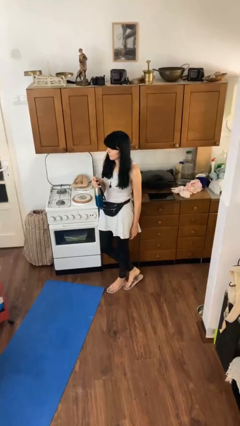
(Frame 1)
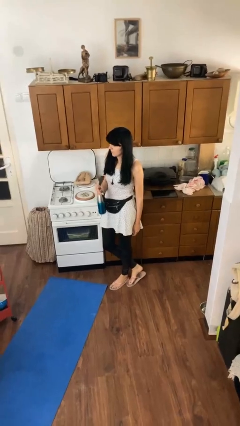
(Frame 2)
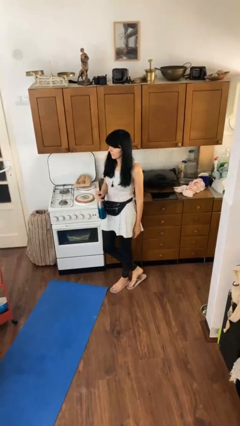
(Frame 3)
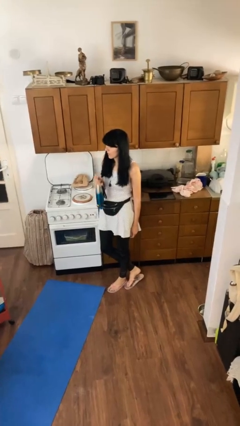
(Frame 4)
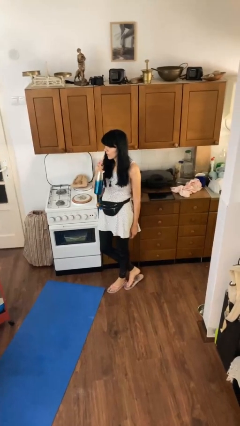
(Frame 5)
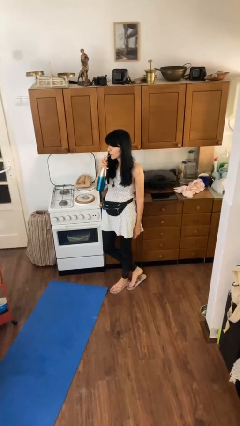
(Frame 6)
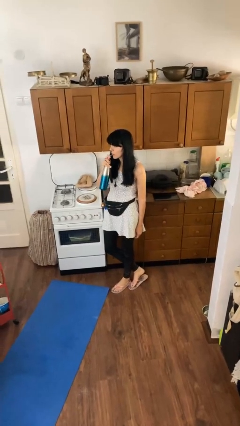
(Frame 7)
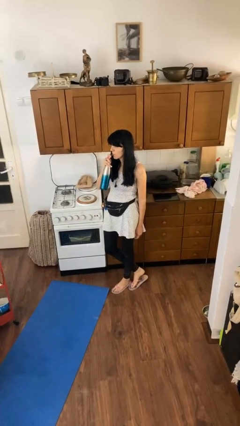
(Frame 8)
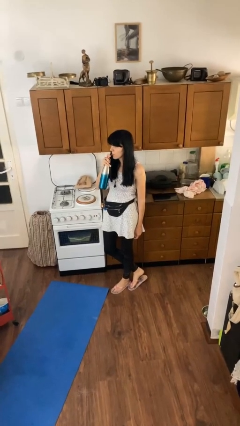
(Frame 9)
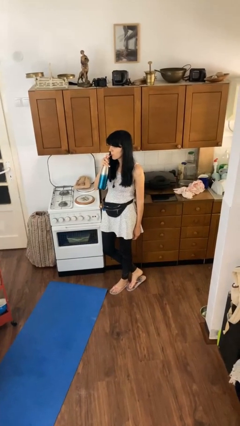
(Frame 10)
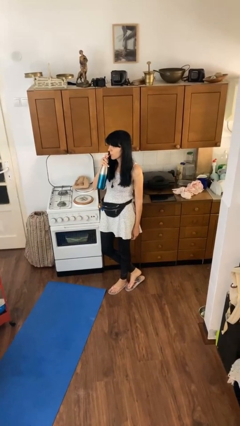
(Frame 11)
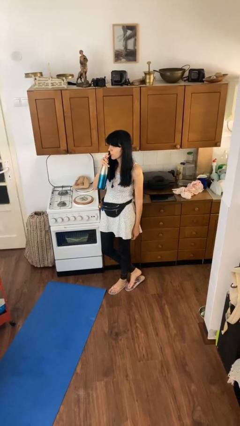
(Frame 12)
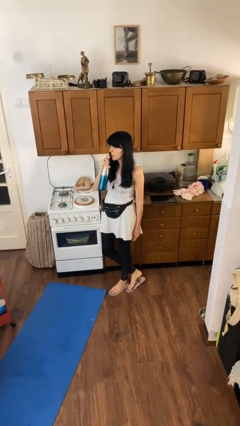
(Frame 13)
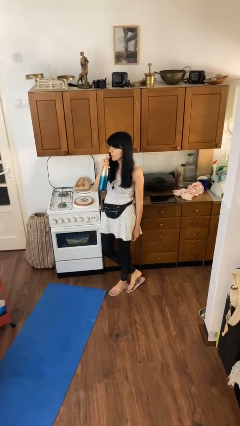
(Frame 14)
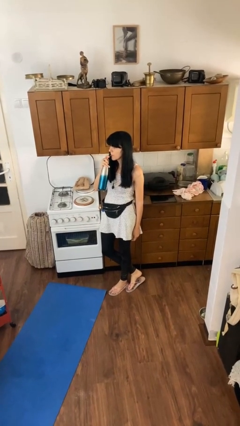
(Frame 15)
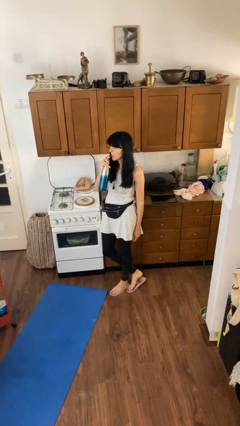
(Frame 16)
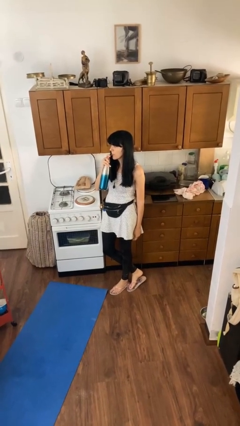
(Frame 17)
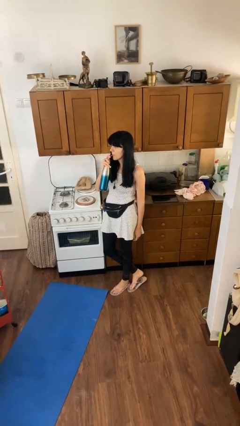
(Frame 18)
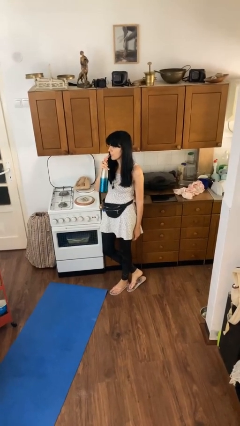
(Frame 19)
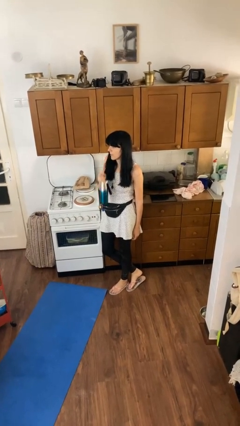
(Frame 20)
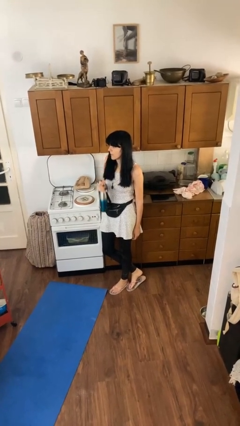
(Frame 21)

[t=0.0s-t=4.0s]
person drinks from straw

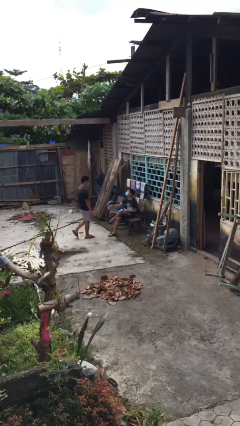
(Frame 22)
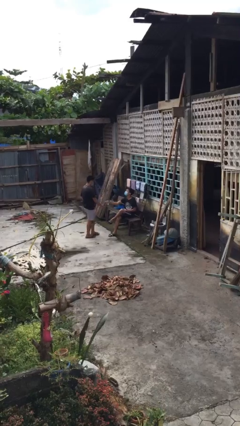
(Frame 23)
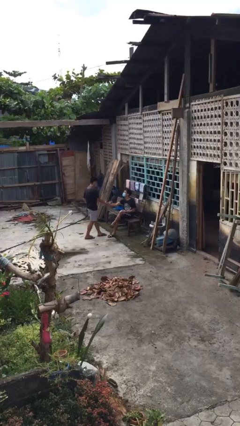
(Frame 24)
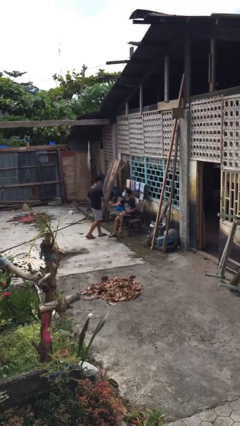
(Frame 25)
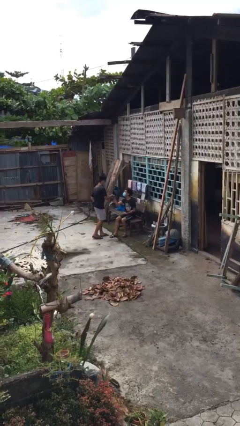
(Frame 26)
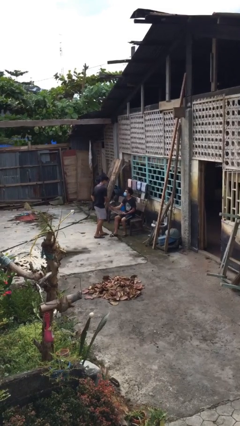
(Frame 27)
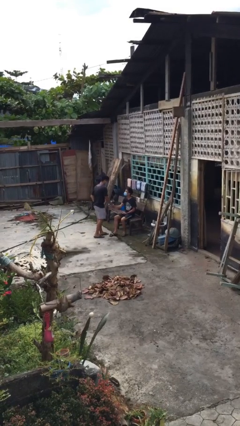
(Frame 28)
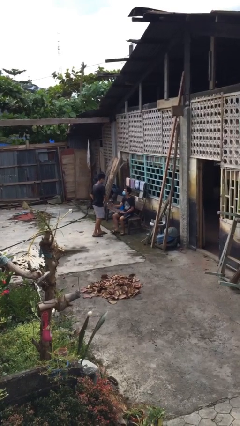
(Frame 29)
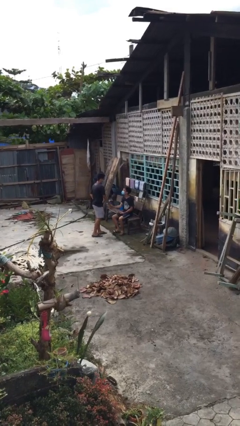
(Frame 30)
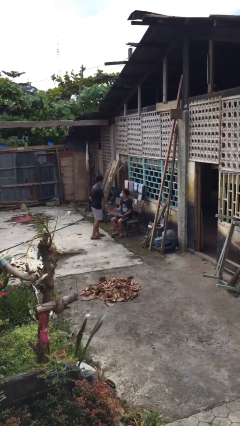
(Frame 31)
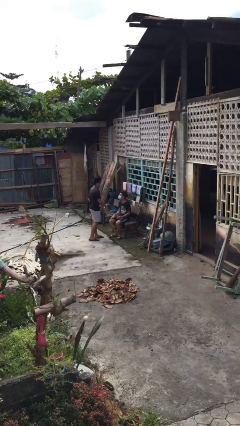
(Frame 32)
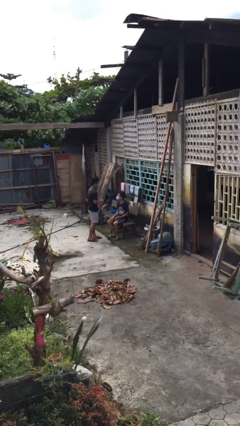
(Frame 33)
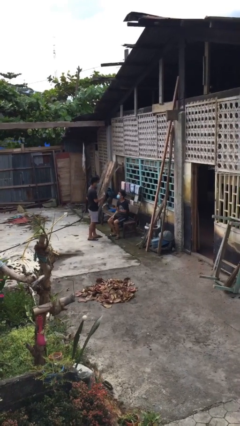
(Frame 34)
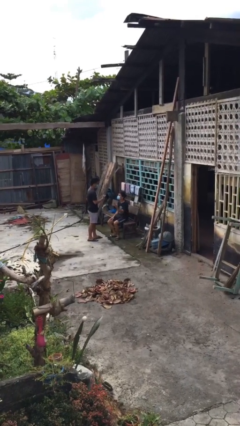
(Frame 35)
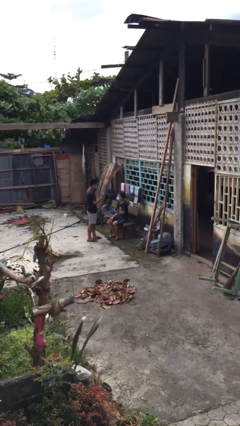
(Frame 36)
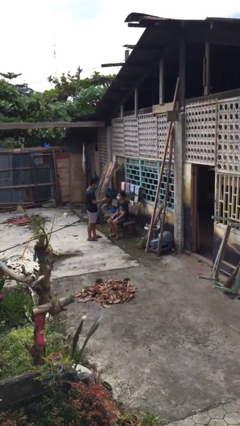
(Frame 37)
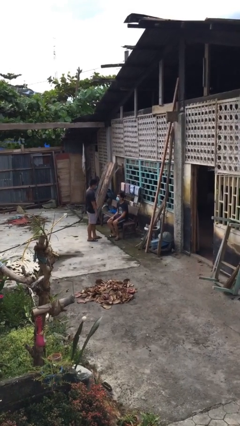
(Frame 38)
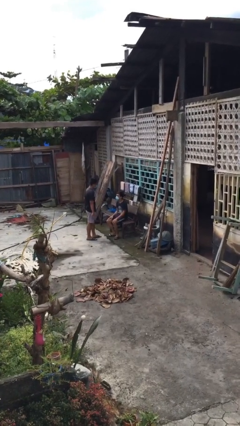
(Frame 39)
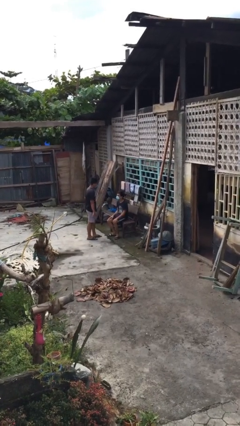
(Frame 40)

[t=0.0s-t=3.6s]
person shakes hand

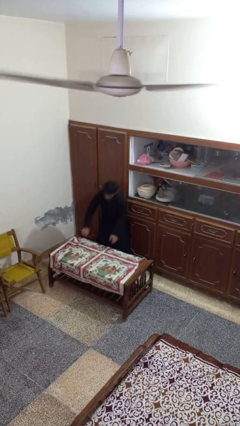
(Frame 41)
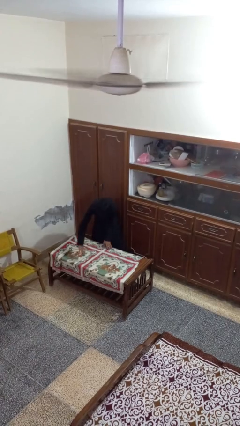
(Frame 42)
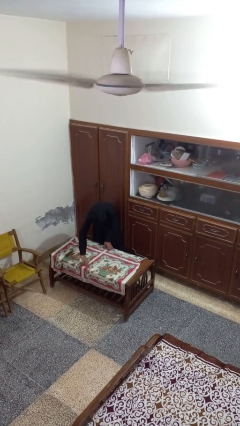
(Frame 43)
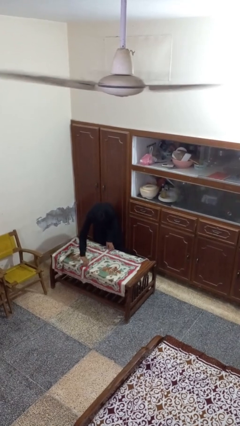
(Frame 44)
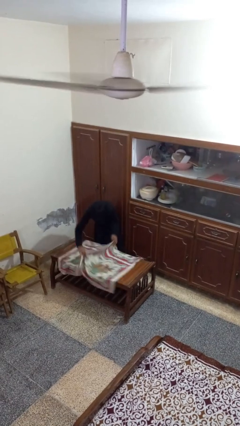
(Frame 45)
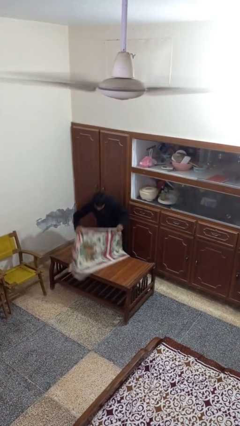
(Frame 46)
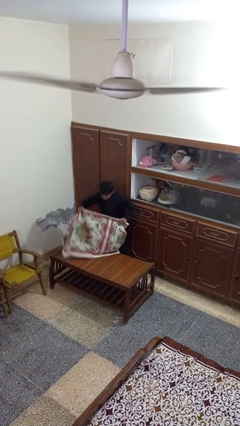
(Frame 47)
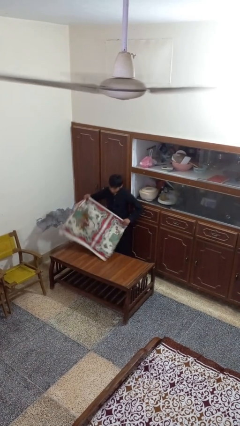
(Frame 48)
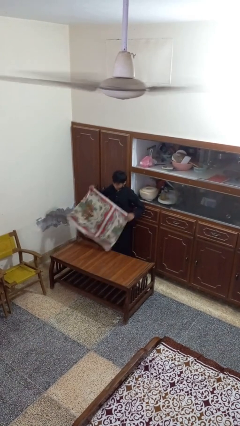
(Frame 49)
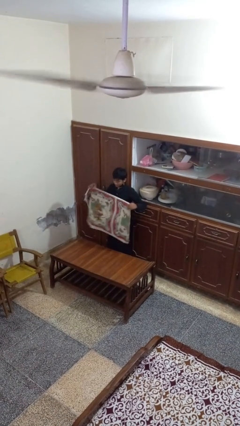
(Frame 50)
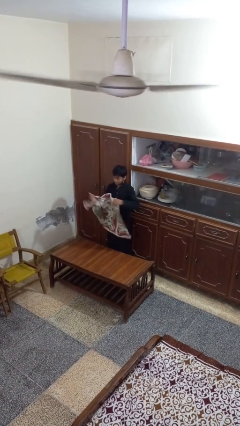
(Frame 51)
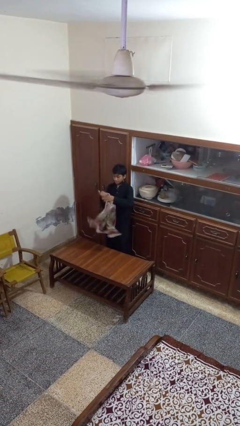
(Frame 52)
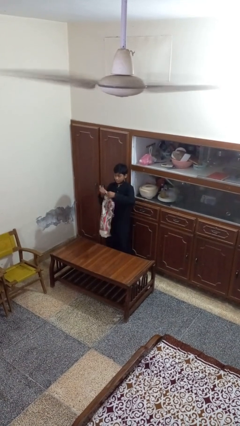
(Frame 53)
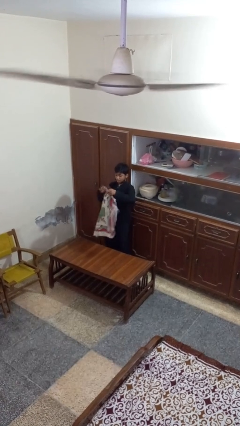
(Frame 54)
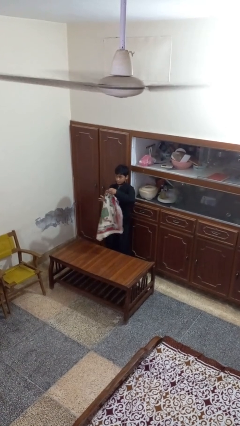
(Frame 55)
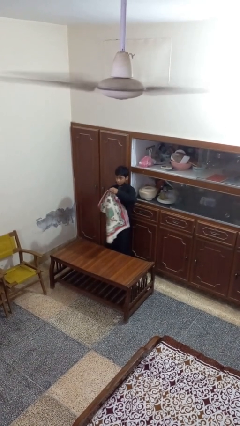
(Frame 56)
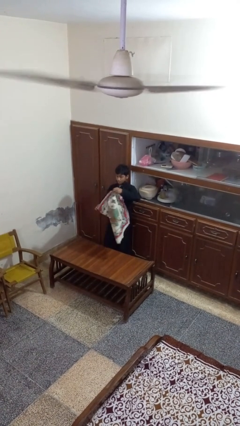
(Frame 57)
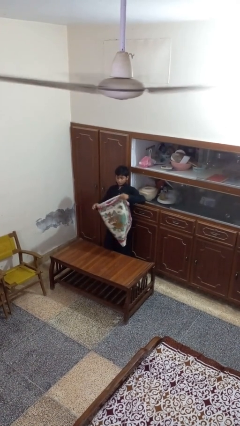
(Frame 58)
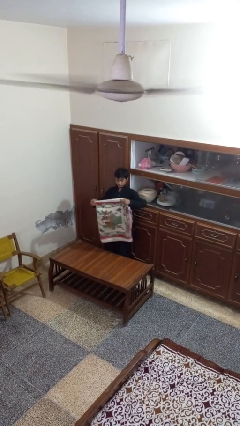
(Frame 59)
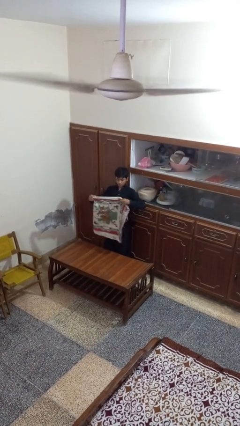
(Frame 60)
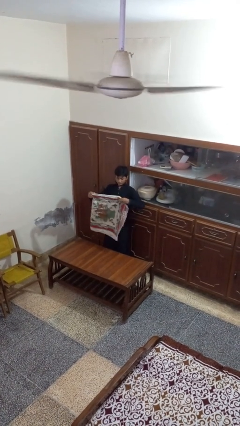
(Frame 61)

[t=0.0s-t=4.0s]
person folds tablecloth

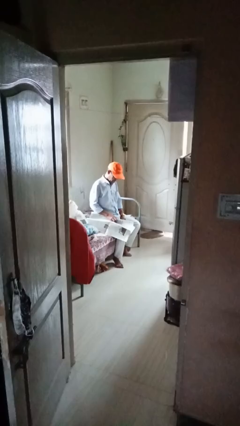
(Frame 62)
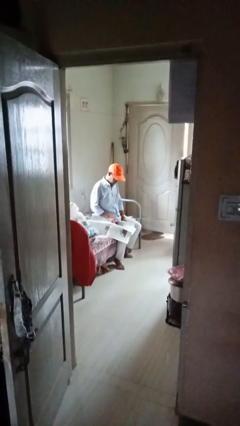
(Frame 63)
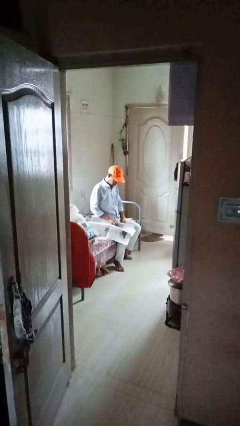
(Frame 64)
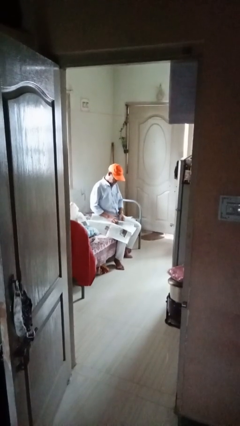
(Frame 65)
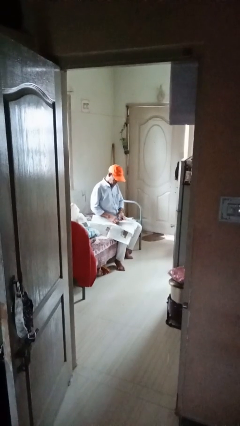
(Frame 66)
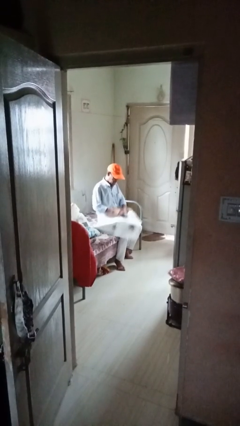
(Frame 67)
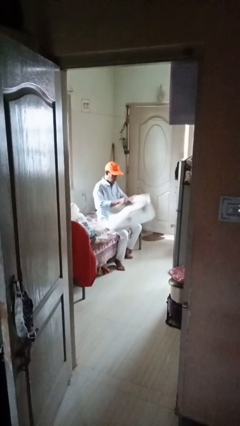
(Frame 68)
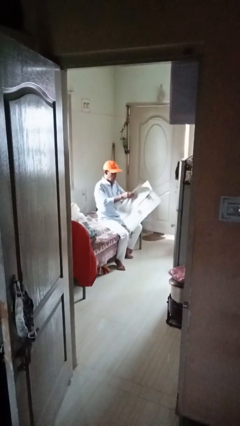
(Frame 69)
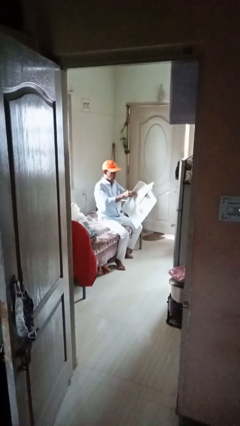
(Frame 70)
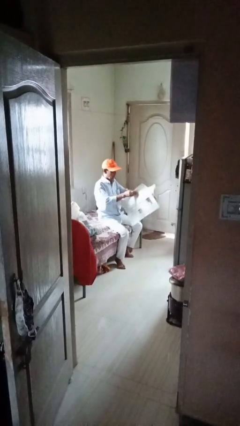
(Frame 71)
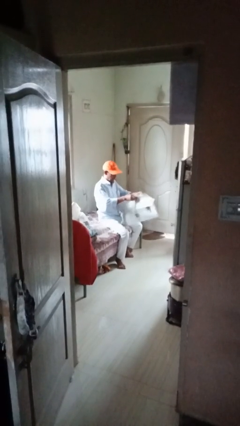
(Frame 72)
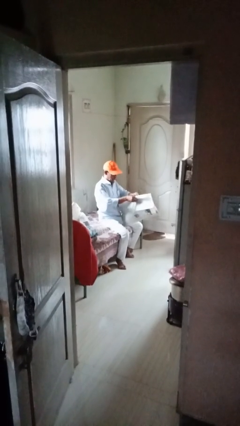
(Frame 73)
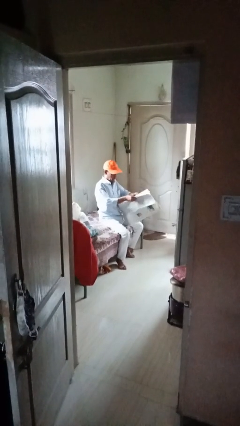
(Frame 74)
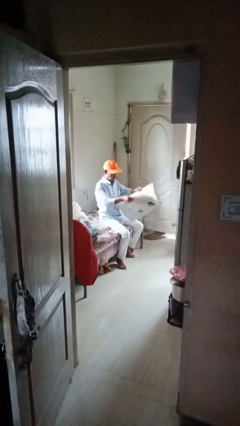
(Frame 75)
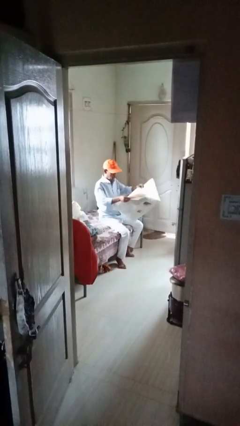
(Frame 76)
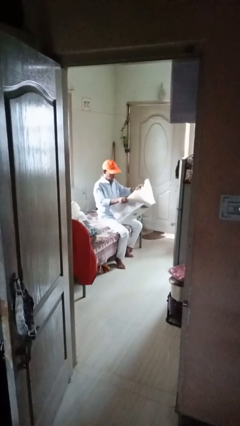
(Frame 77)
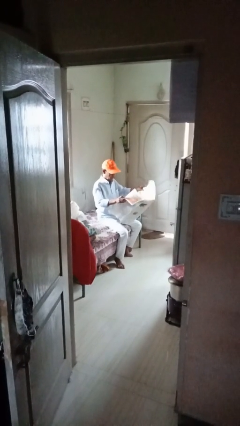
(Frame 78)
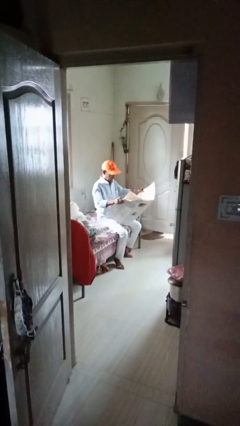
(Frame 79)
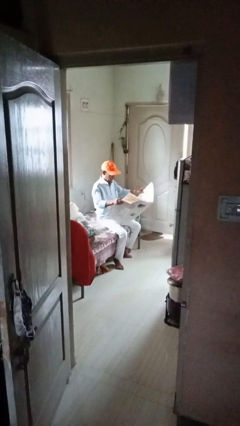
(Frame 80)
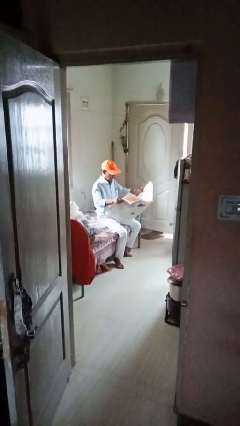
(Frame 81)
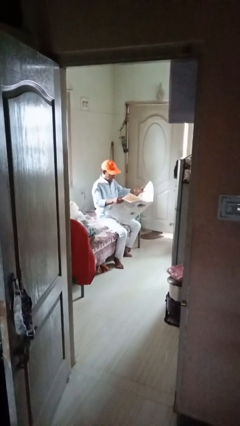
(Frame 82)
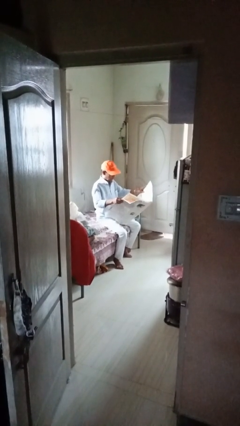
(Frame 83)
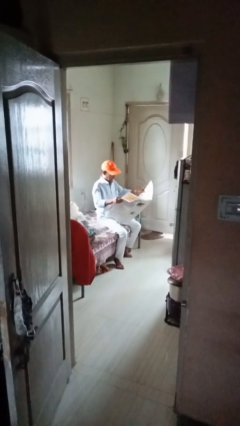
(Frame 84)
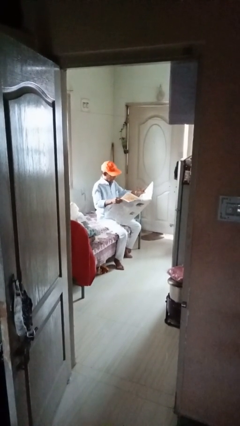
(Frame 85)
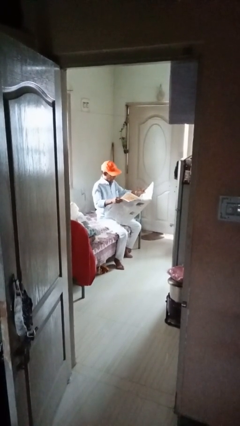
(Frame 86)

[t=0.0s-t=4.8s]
person reads newspaper

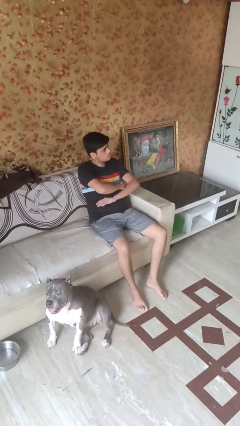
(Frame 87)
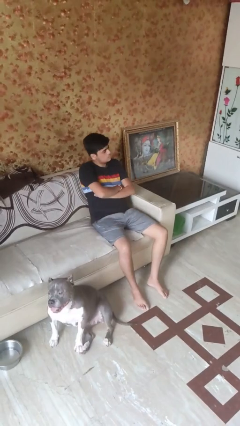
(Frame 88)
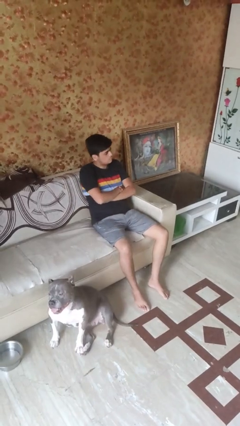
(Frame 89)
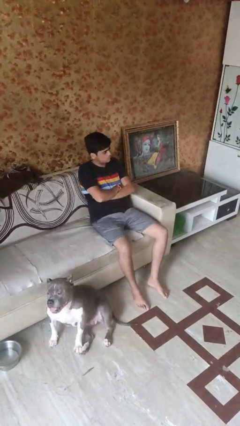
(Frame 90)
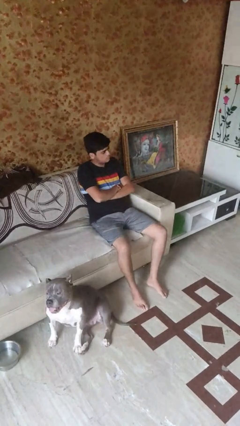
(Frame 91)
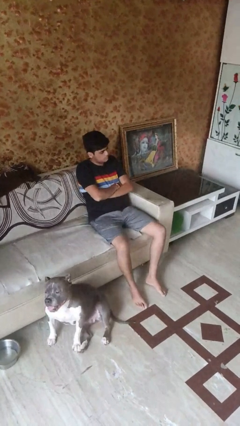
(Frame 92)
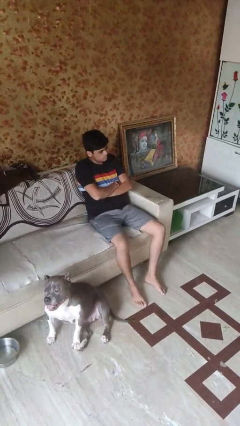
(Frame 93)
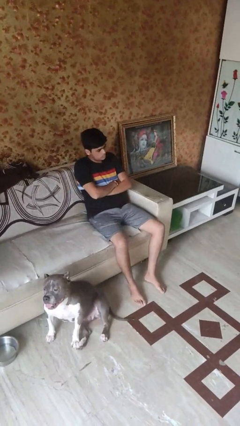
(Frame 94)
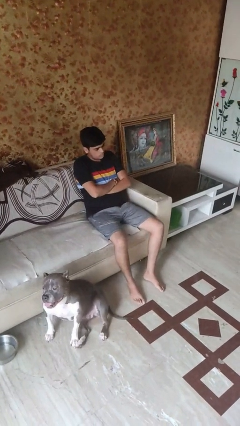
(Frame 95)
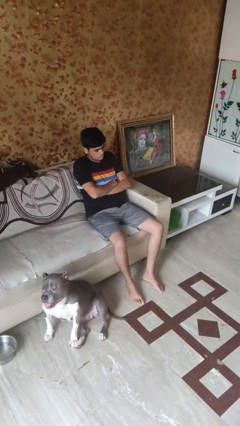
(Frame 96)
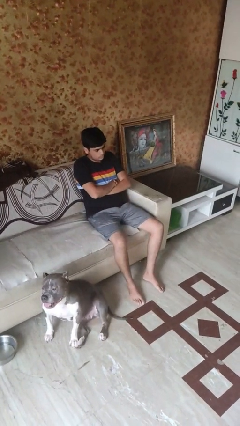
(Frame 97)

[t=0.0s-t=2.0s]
person crosses arms
